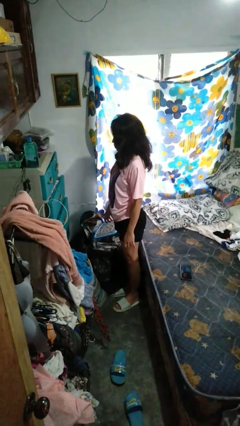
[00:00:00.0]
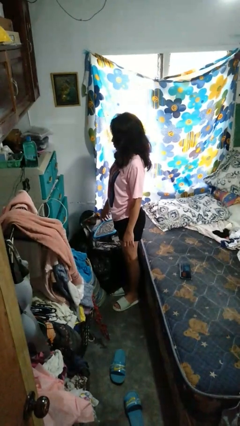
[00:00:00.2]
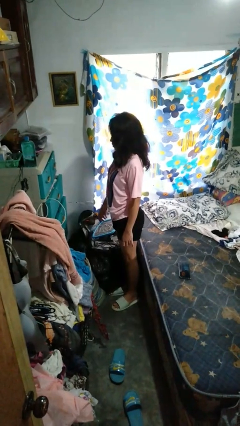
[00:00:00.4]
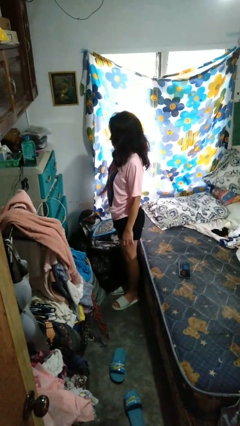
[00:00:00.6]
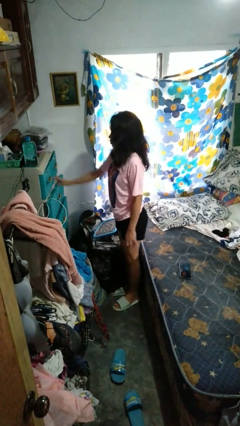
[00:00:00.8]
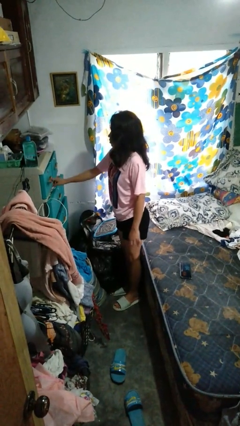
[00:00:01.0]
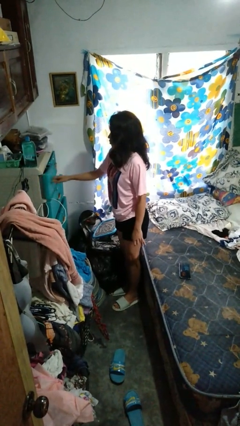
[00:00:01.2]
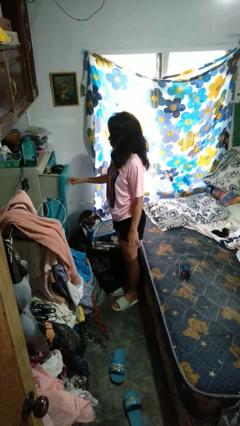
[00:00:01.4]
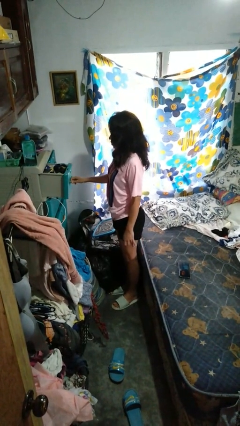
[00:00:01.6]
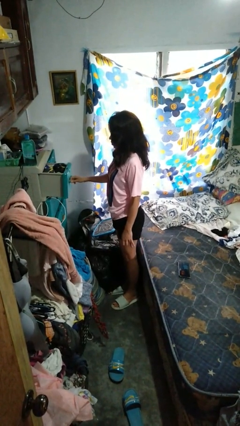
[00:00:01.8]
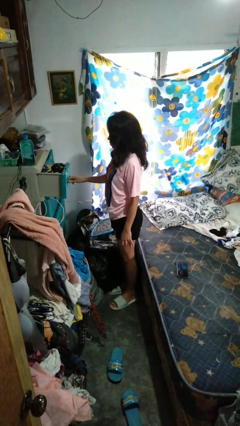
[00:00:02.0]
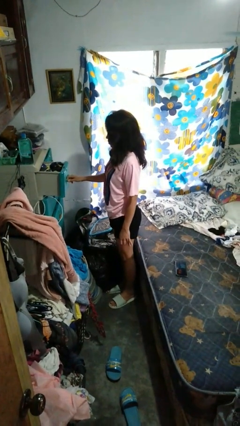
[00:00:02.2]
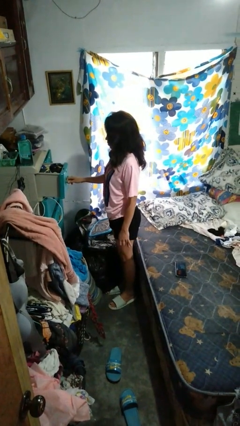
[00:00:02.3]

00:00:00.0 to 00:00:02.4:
person opens dresser drawer

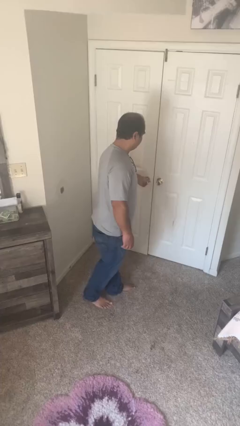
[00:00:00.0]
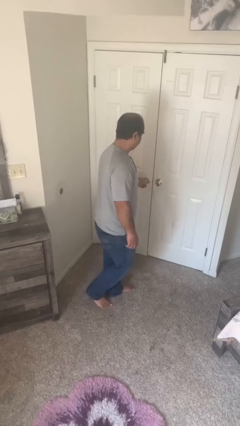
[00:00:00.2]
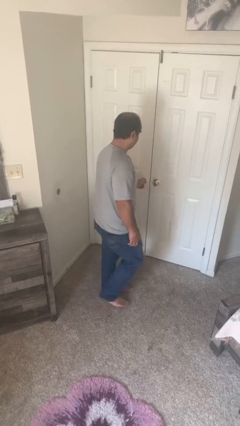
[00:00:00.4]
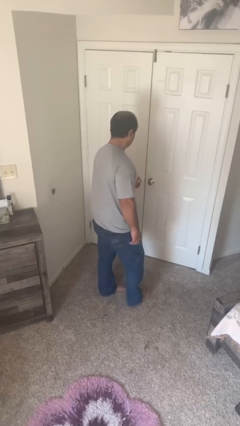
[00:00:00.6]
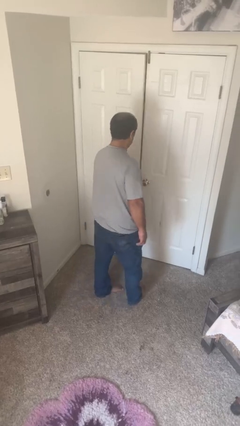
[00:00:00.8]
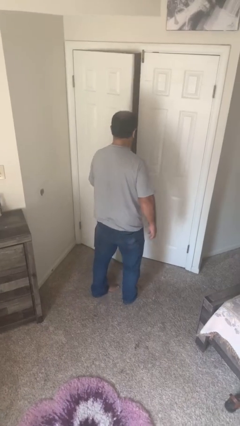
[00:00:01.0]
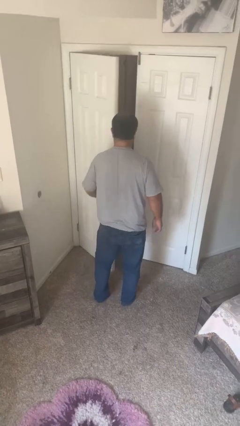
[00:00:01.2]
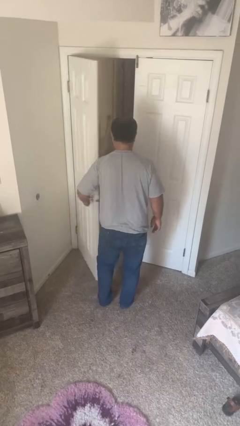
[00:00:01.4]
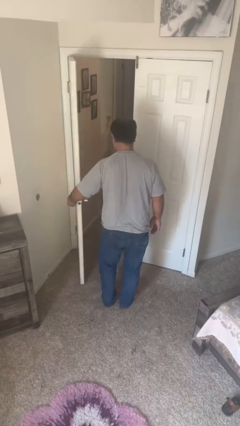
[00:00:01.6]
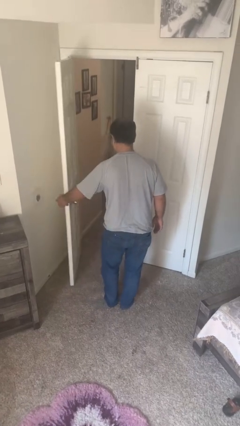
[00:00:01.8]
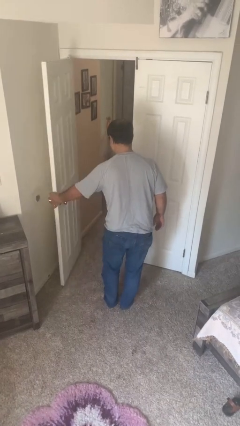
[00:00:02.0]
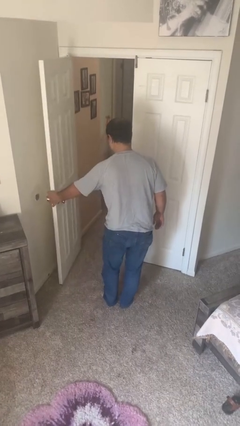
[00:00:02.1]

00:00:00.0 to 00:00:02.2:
person opens facility door

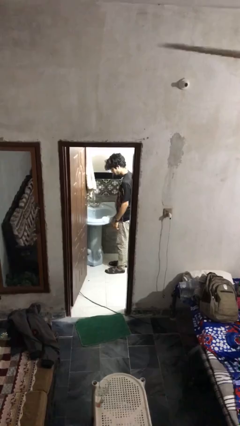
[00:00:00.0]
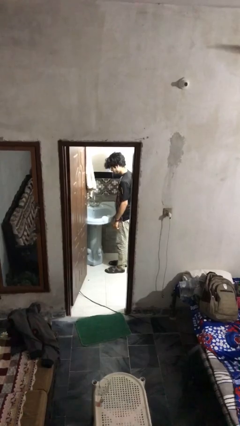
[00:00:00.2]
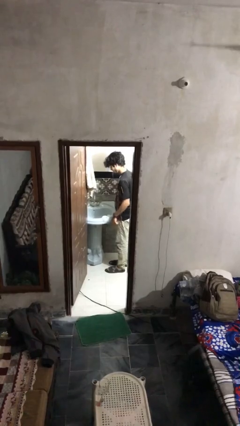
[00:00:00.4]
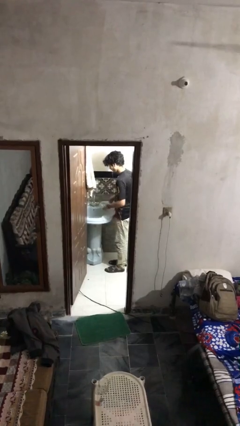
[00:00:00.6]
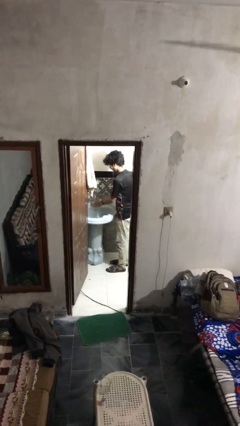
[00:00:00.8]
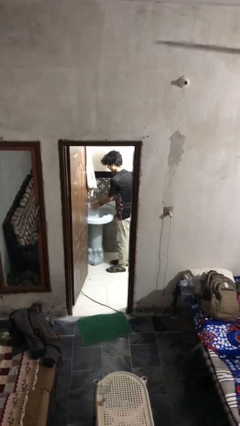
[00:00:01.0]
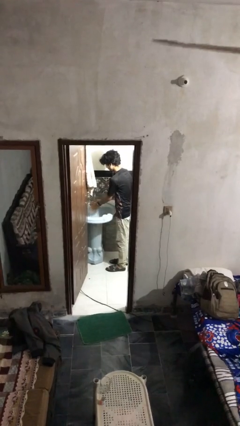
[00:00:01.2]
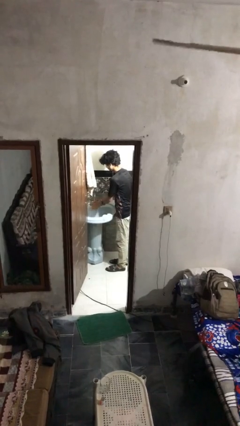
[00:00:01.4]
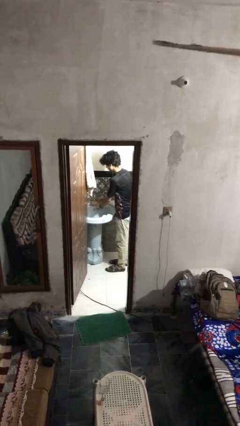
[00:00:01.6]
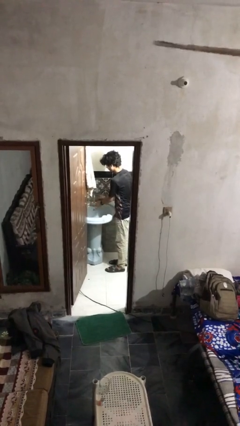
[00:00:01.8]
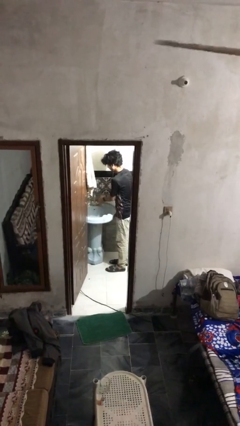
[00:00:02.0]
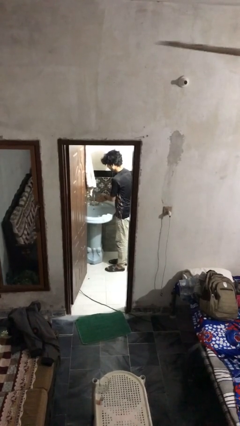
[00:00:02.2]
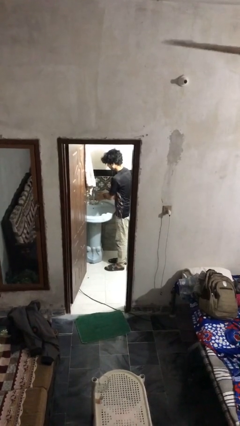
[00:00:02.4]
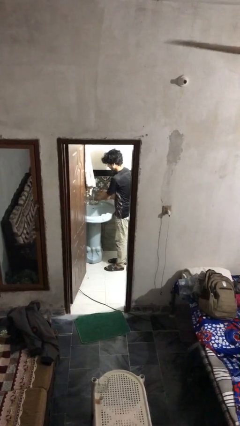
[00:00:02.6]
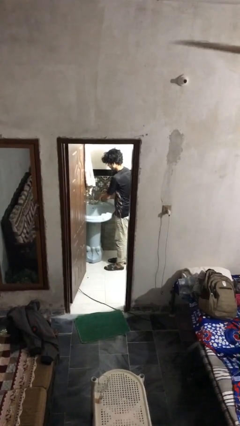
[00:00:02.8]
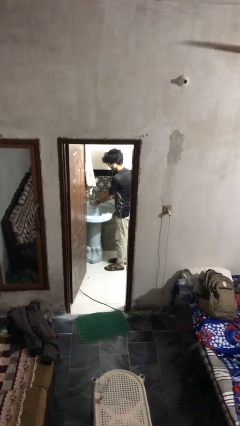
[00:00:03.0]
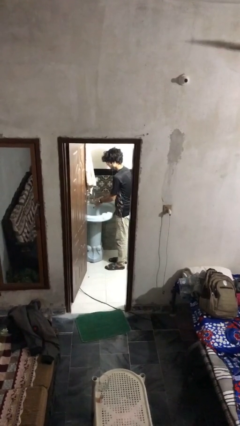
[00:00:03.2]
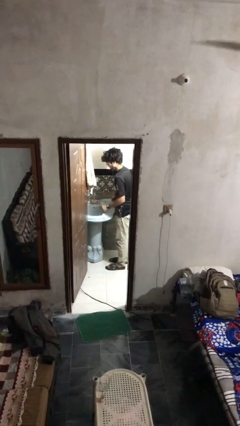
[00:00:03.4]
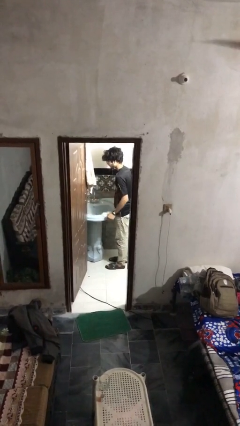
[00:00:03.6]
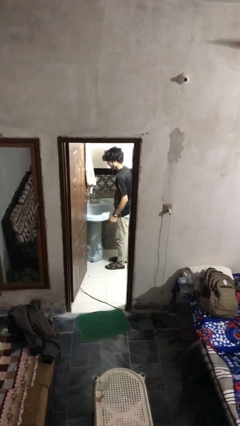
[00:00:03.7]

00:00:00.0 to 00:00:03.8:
person washes hands

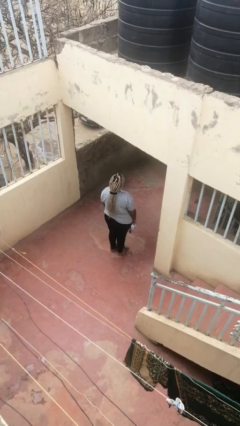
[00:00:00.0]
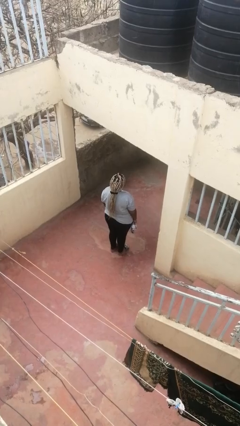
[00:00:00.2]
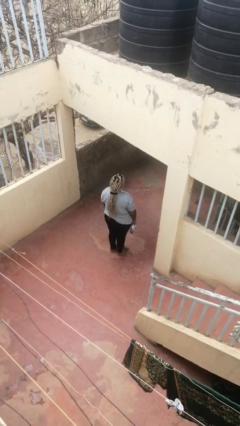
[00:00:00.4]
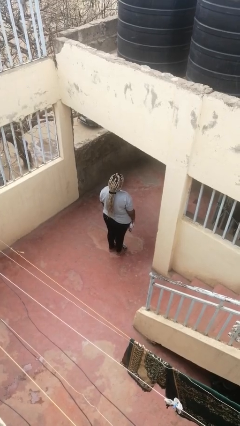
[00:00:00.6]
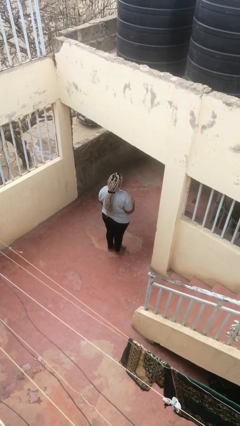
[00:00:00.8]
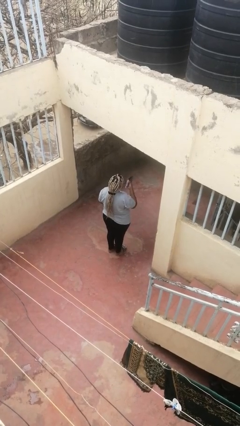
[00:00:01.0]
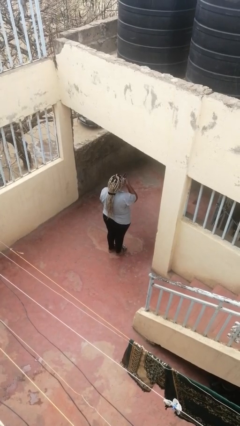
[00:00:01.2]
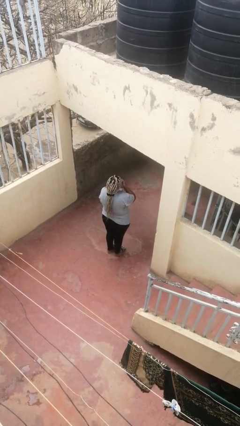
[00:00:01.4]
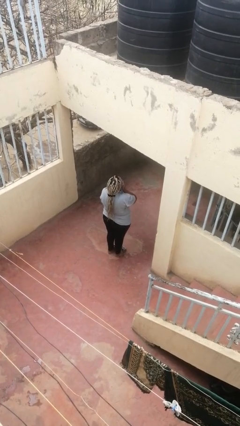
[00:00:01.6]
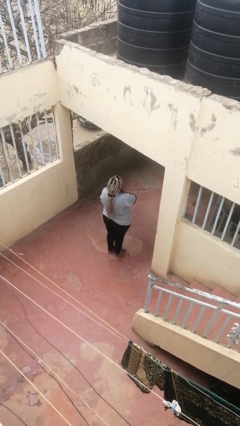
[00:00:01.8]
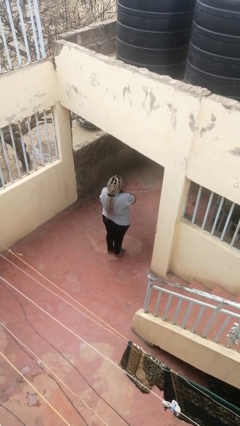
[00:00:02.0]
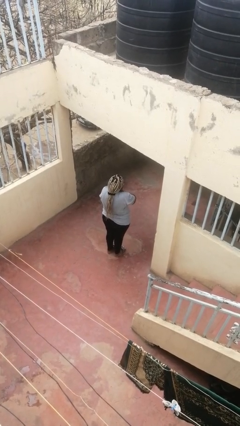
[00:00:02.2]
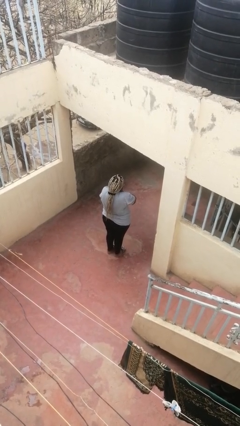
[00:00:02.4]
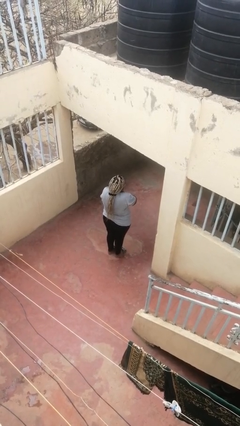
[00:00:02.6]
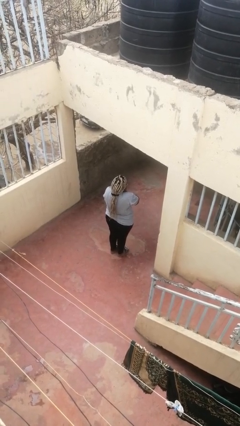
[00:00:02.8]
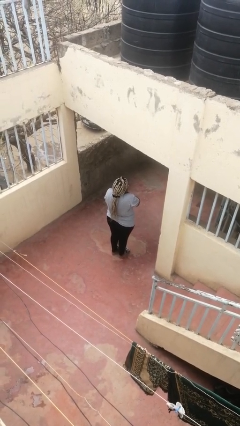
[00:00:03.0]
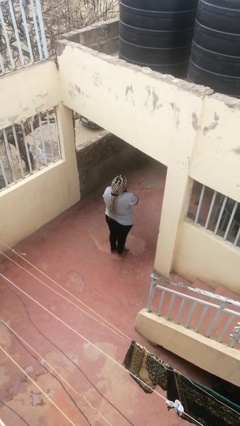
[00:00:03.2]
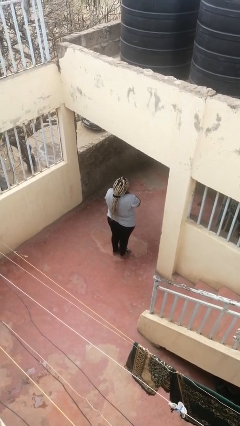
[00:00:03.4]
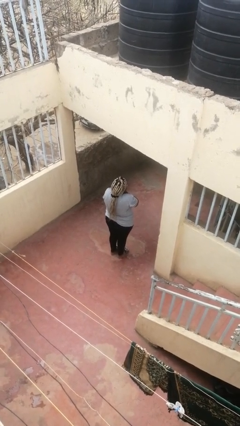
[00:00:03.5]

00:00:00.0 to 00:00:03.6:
person blows nose

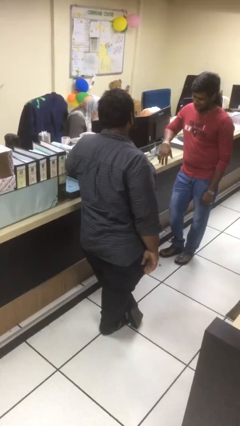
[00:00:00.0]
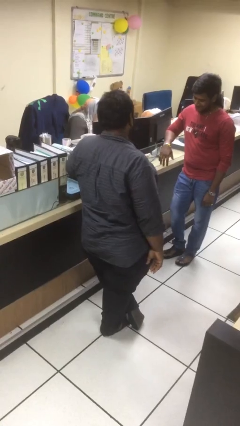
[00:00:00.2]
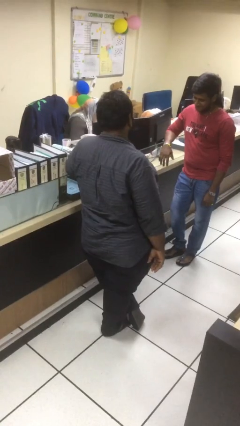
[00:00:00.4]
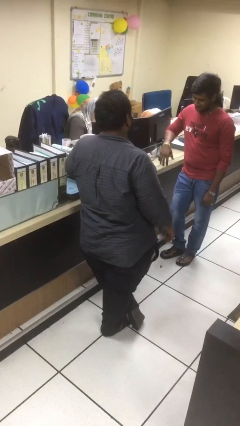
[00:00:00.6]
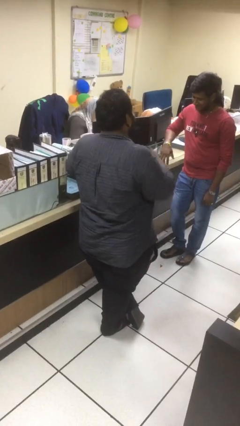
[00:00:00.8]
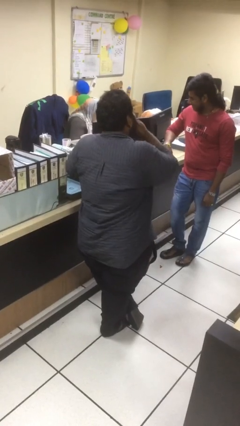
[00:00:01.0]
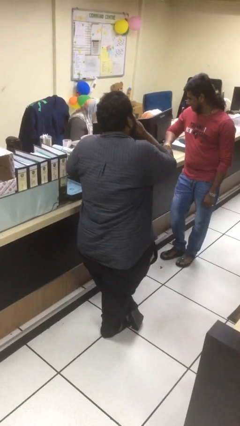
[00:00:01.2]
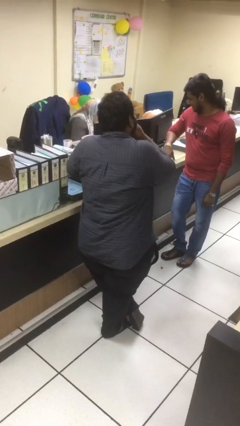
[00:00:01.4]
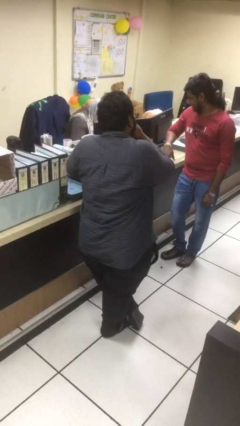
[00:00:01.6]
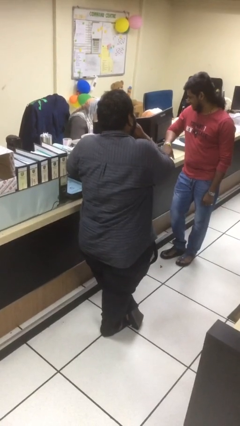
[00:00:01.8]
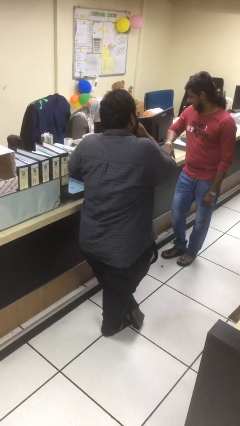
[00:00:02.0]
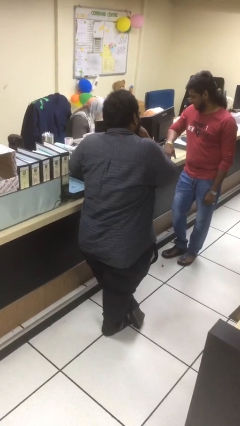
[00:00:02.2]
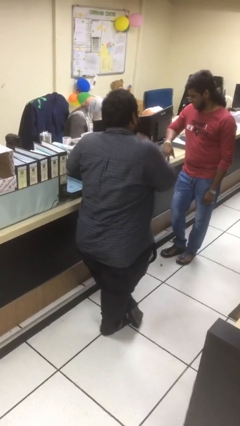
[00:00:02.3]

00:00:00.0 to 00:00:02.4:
person laughs with person

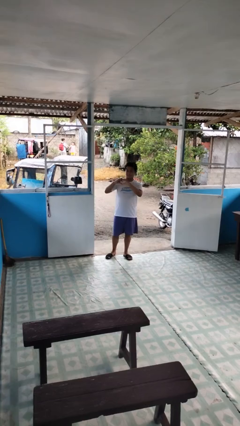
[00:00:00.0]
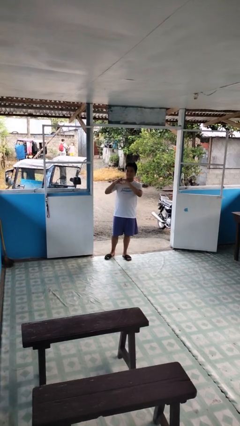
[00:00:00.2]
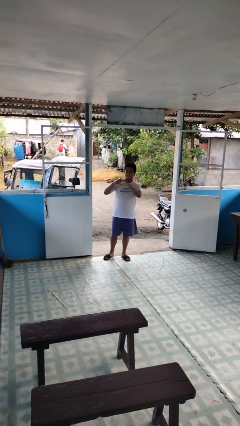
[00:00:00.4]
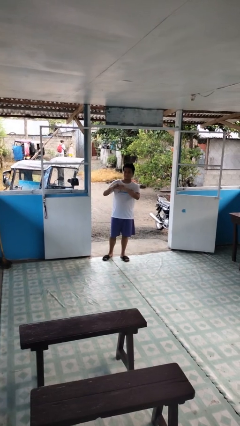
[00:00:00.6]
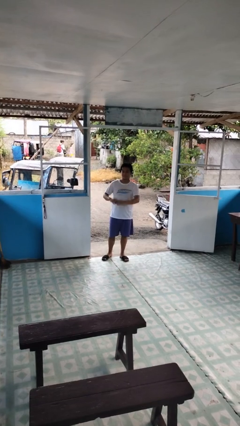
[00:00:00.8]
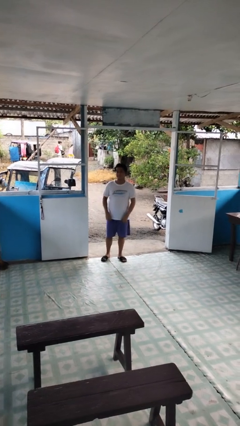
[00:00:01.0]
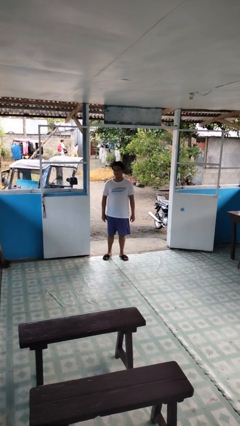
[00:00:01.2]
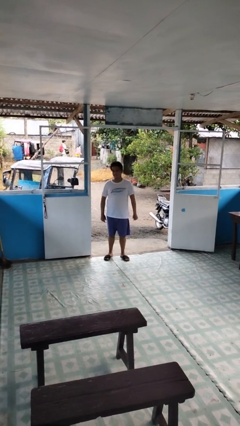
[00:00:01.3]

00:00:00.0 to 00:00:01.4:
person gestures heart

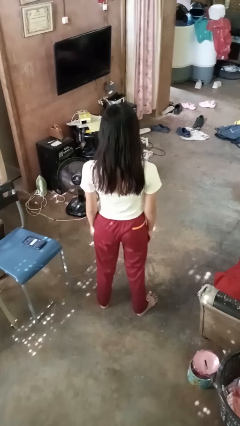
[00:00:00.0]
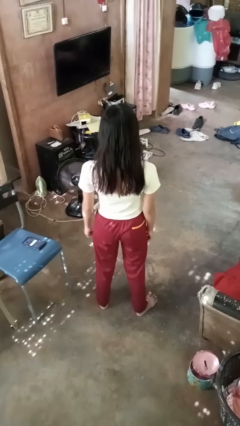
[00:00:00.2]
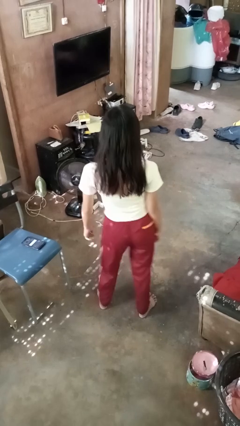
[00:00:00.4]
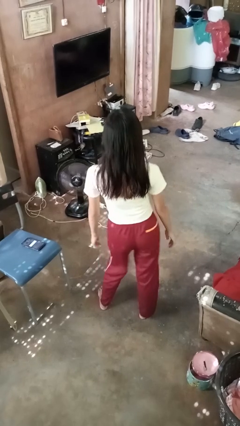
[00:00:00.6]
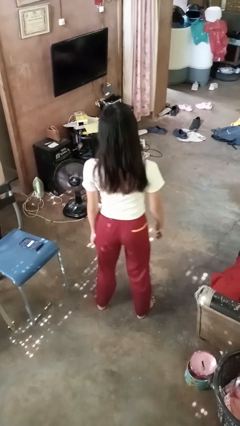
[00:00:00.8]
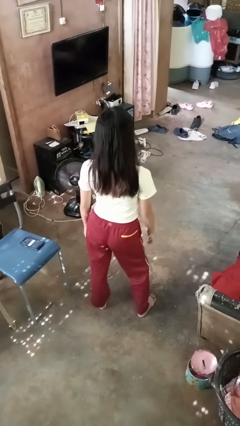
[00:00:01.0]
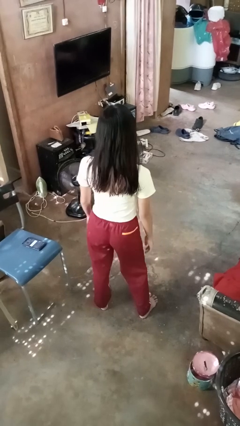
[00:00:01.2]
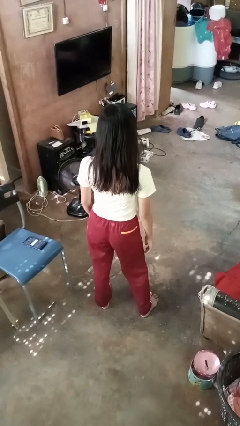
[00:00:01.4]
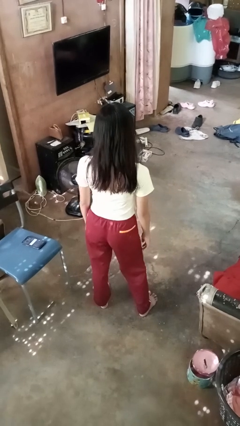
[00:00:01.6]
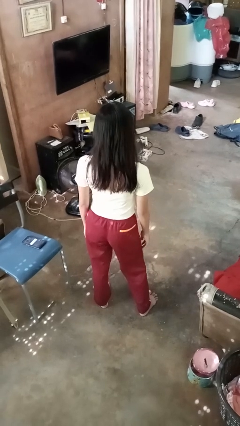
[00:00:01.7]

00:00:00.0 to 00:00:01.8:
person wiggles hips
